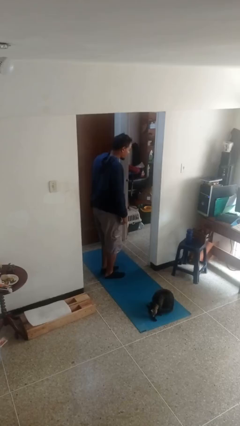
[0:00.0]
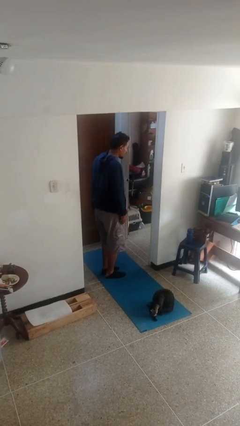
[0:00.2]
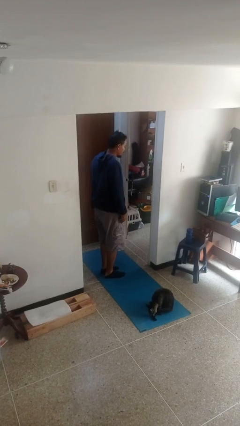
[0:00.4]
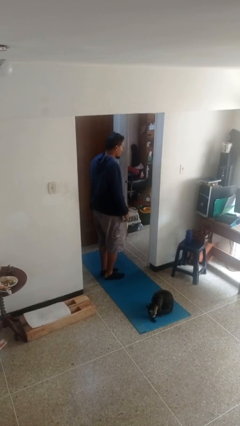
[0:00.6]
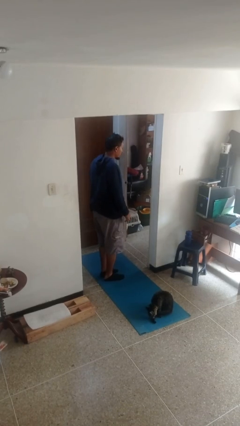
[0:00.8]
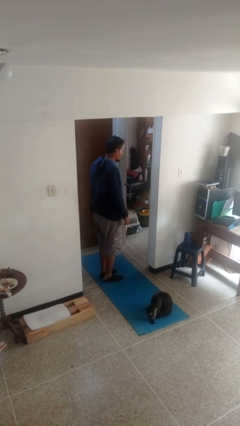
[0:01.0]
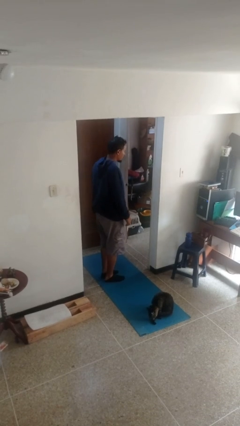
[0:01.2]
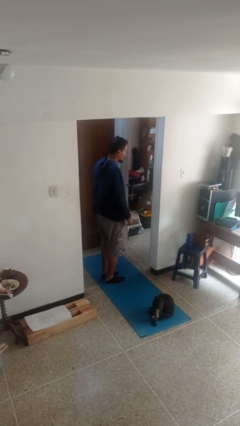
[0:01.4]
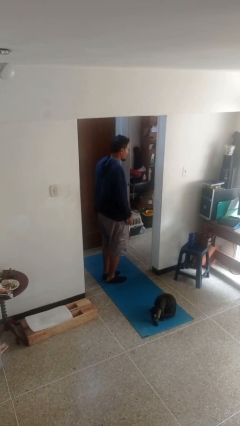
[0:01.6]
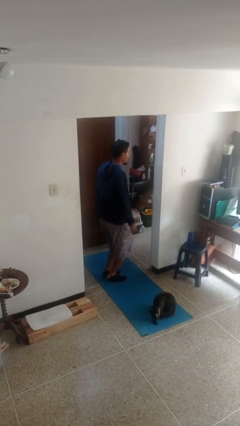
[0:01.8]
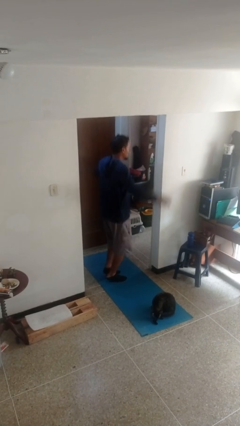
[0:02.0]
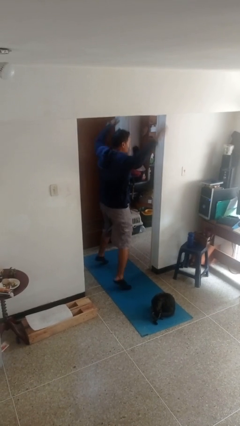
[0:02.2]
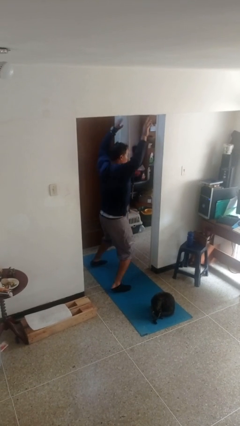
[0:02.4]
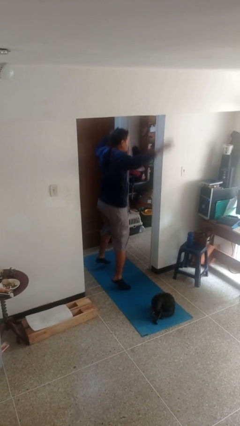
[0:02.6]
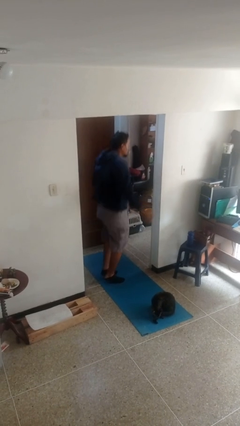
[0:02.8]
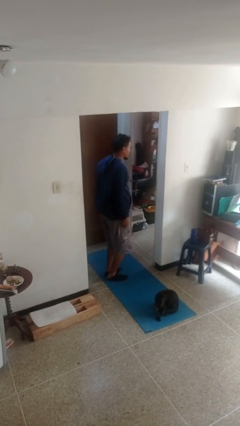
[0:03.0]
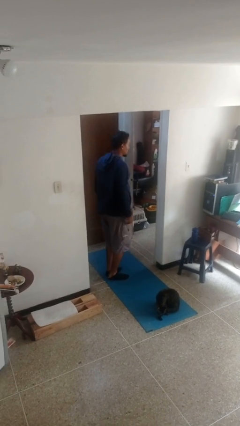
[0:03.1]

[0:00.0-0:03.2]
person exercises with jumping jacks

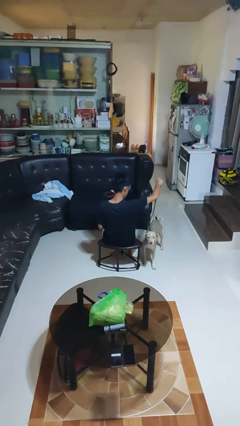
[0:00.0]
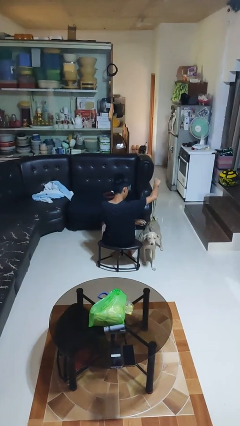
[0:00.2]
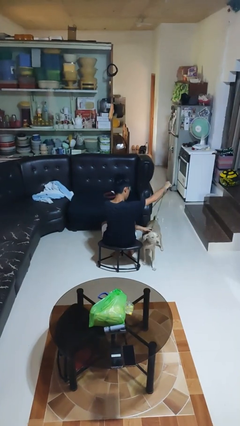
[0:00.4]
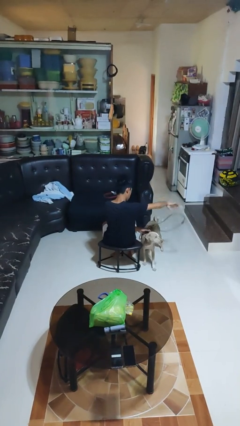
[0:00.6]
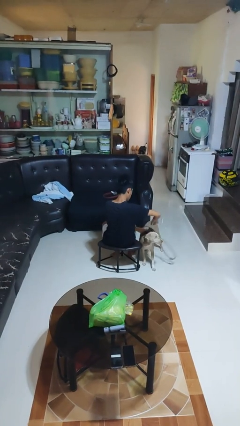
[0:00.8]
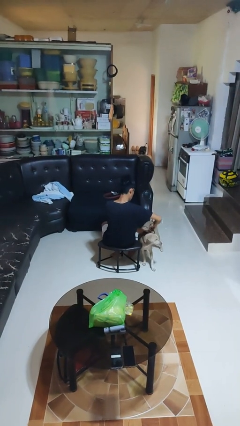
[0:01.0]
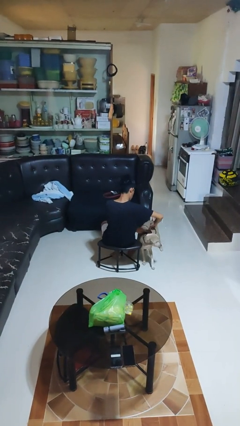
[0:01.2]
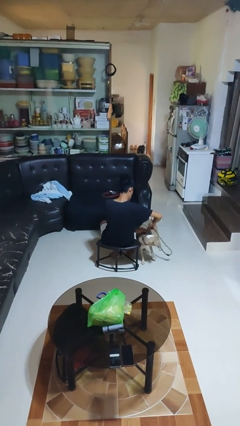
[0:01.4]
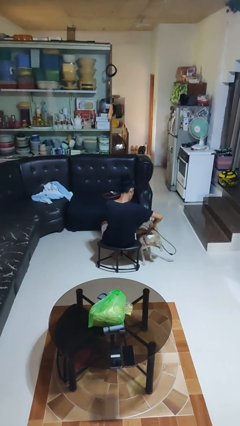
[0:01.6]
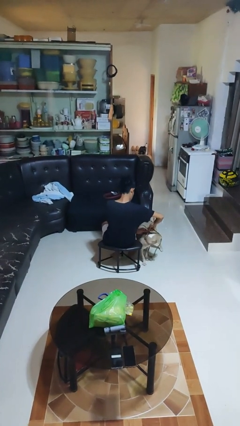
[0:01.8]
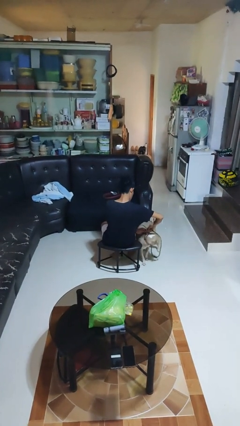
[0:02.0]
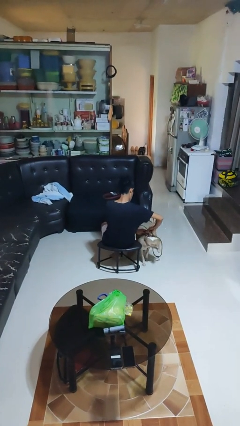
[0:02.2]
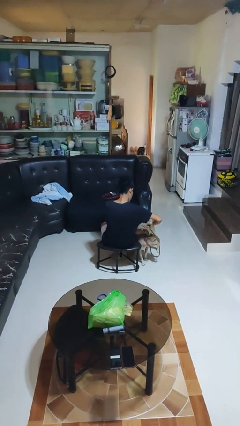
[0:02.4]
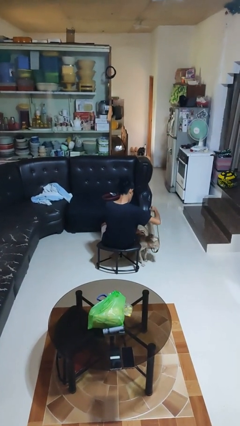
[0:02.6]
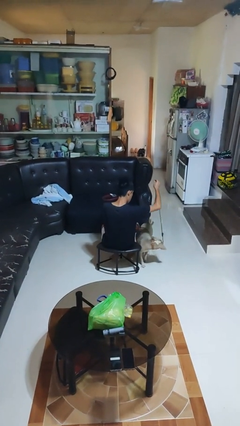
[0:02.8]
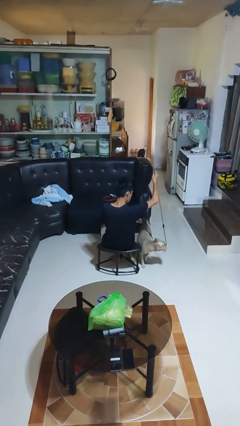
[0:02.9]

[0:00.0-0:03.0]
person unattaches leash from dog

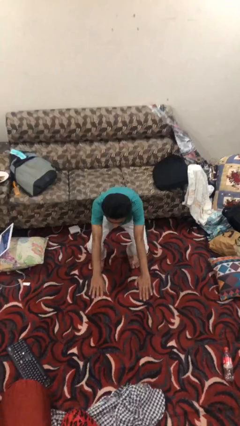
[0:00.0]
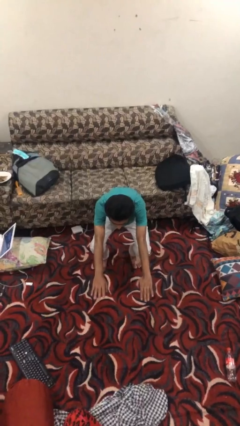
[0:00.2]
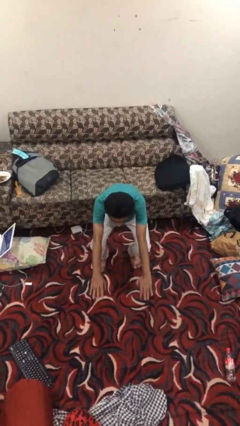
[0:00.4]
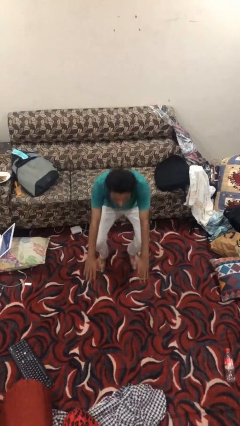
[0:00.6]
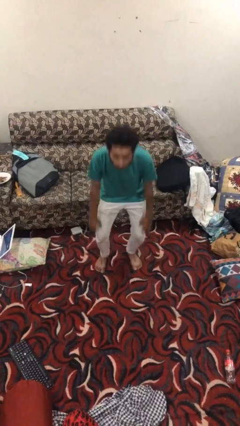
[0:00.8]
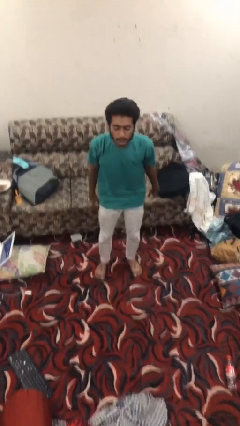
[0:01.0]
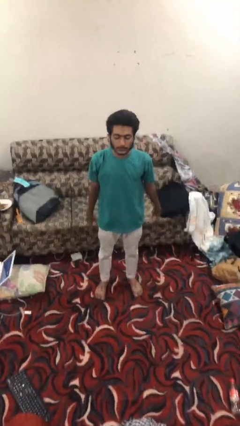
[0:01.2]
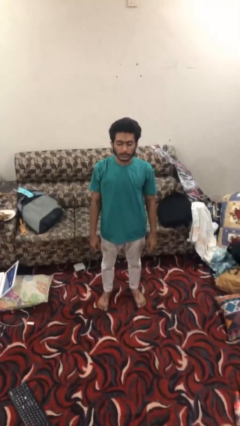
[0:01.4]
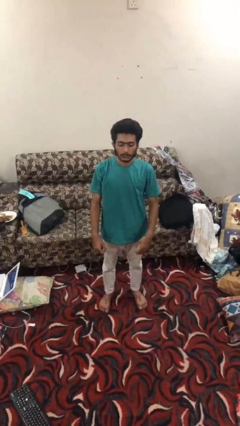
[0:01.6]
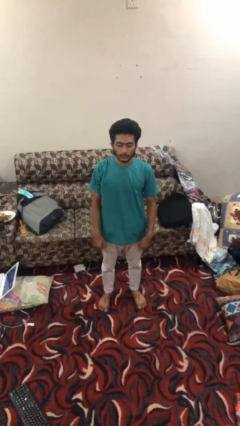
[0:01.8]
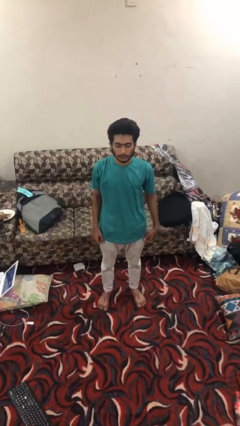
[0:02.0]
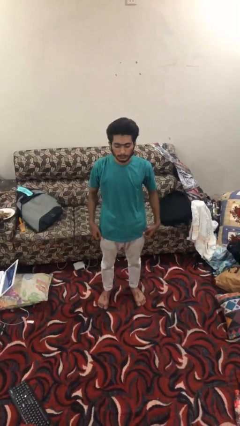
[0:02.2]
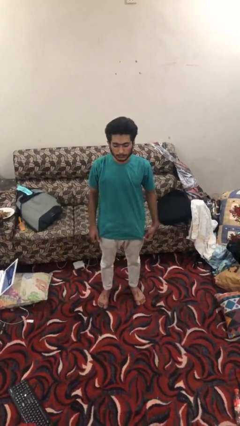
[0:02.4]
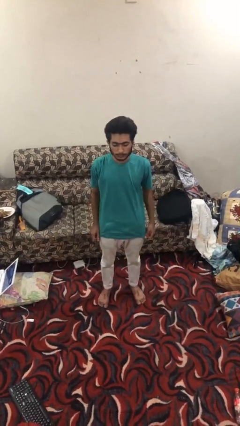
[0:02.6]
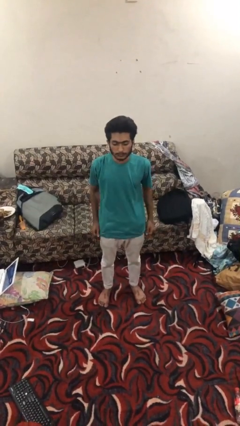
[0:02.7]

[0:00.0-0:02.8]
person stands up

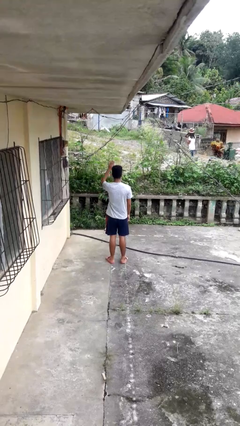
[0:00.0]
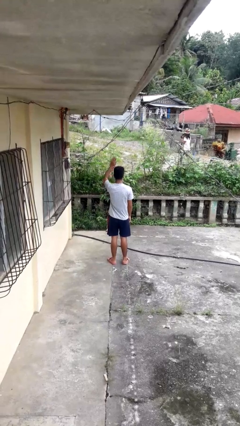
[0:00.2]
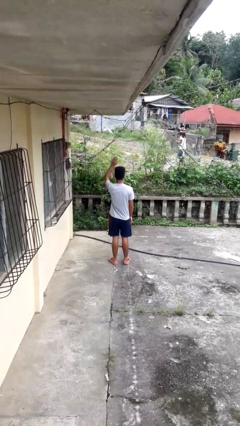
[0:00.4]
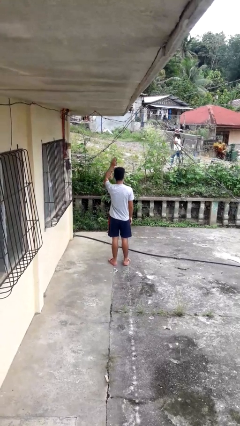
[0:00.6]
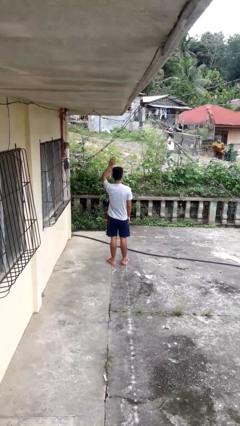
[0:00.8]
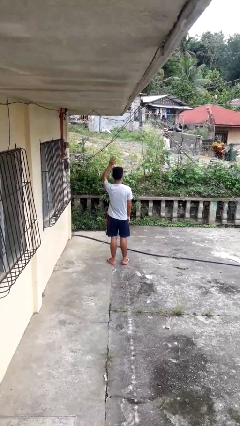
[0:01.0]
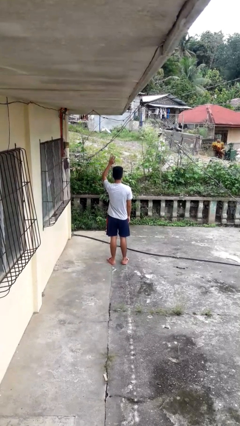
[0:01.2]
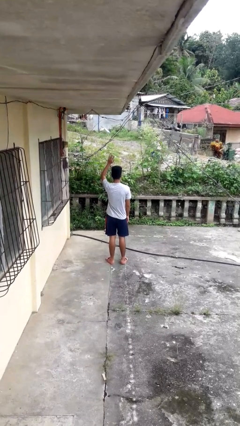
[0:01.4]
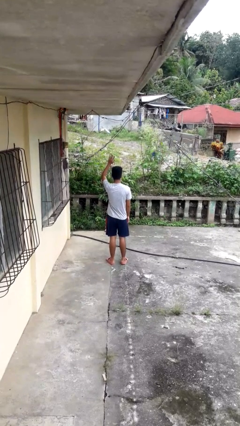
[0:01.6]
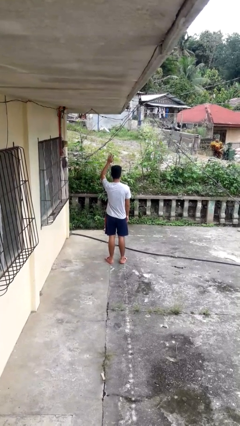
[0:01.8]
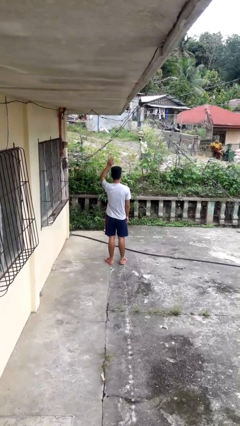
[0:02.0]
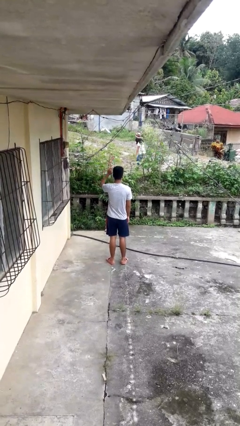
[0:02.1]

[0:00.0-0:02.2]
person gestures raise hand

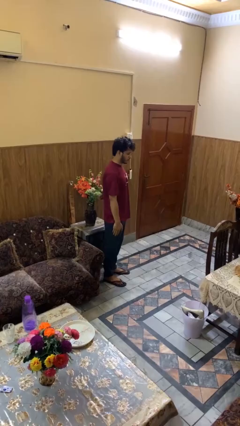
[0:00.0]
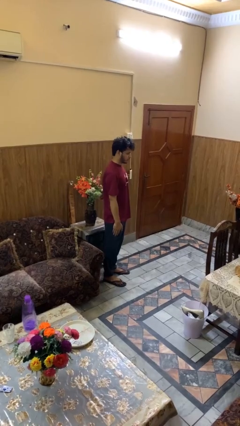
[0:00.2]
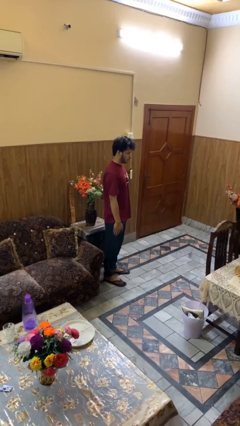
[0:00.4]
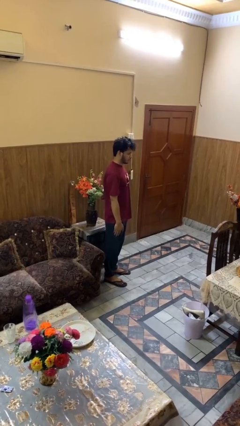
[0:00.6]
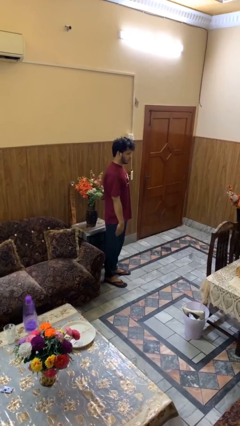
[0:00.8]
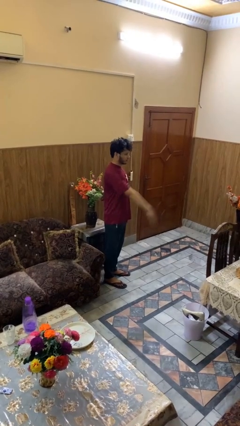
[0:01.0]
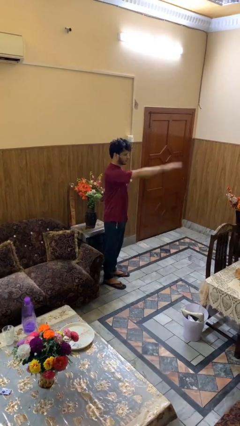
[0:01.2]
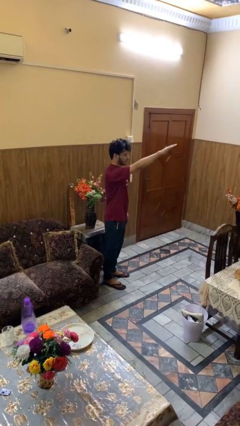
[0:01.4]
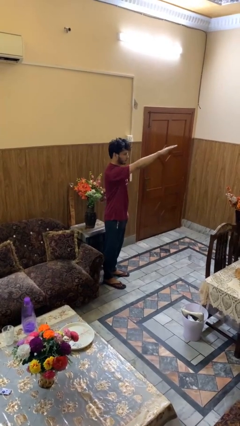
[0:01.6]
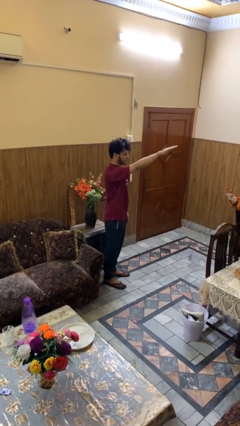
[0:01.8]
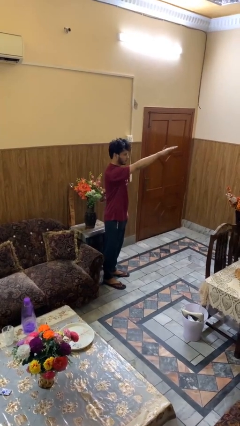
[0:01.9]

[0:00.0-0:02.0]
person gestures swipe up

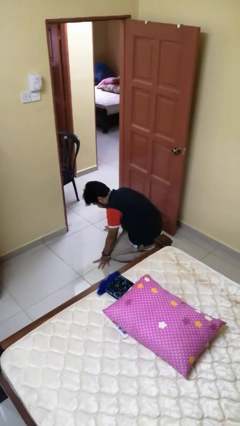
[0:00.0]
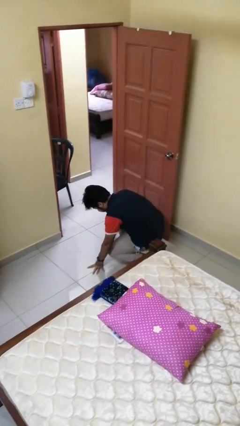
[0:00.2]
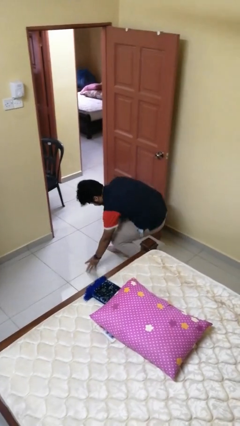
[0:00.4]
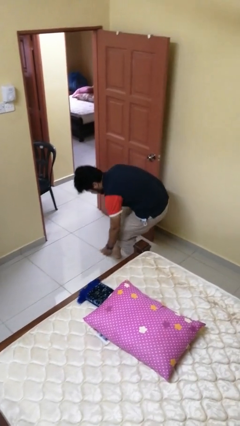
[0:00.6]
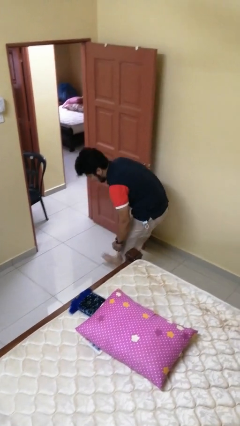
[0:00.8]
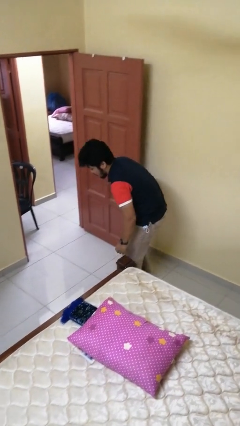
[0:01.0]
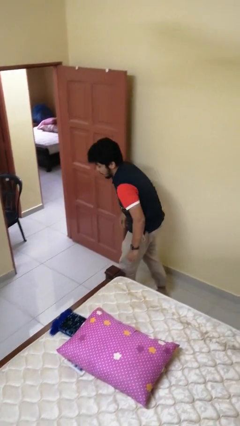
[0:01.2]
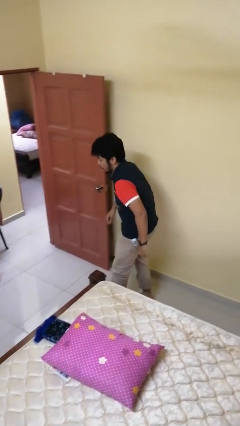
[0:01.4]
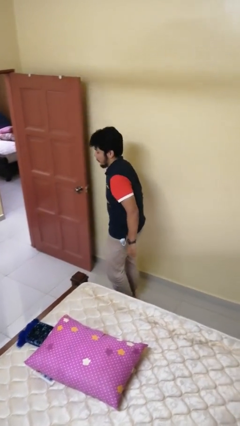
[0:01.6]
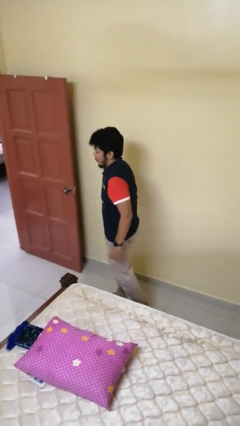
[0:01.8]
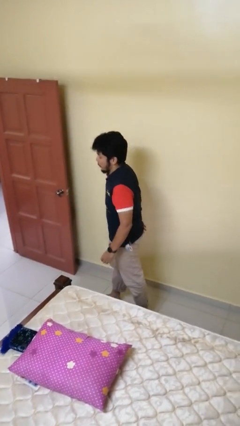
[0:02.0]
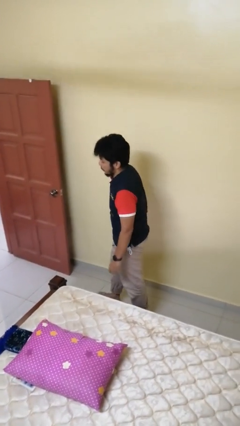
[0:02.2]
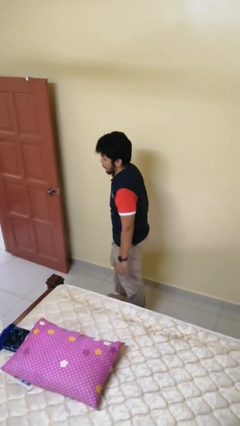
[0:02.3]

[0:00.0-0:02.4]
person stands up from floor

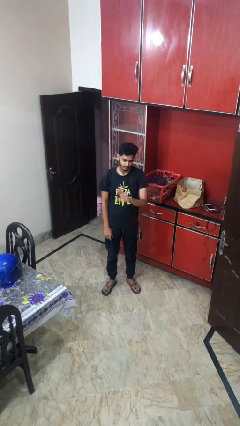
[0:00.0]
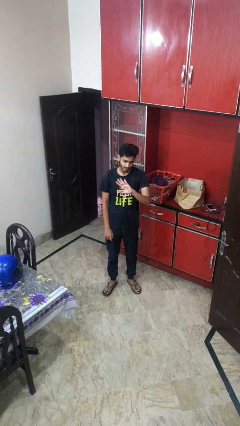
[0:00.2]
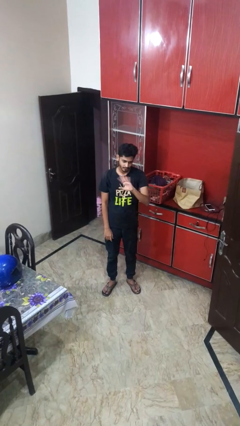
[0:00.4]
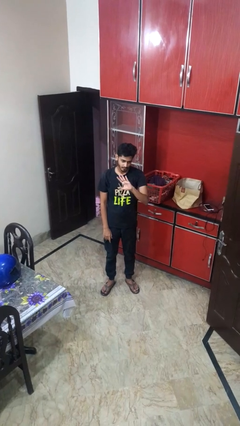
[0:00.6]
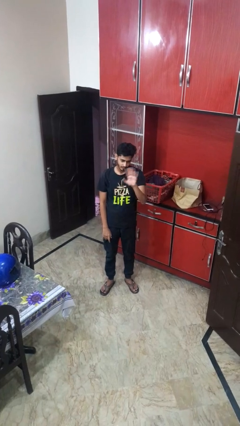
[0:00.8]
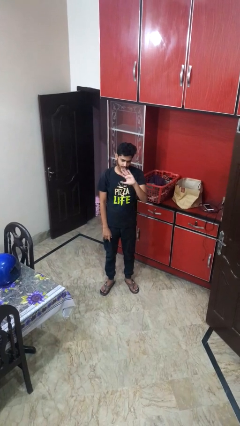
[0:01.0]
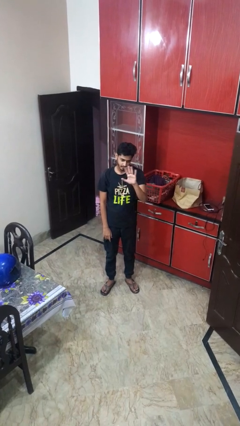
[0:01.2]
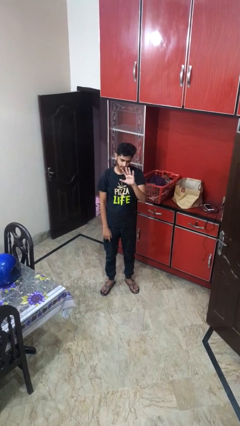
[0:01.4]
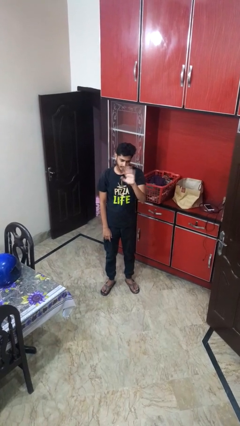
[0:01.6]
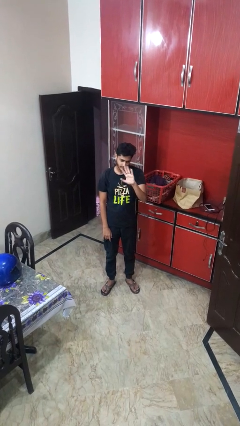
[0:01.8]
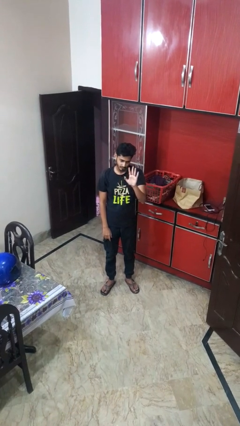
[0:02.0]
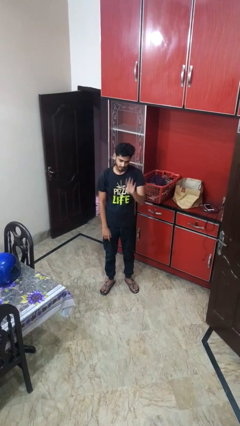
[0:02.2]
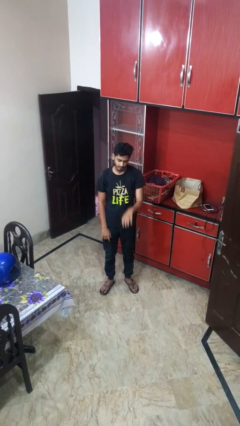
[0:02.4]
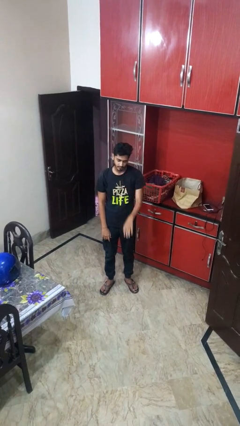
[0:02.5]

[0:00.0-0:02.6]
person waves at person
